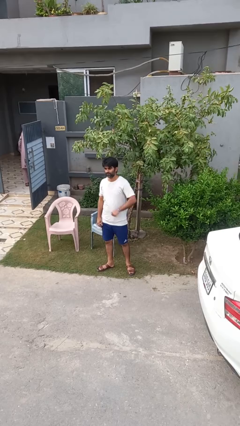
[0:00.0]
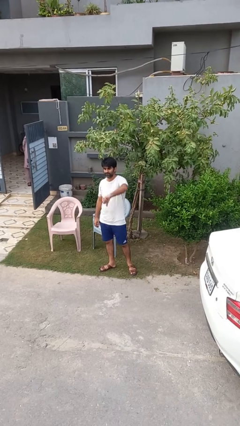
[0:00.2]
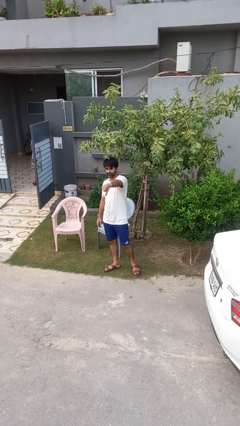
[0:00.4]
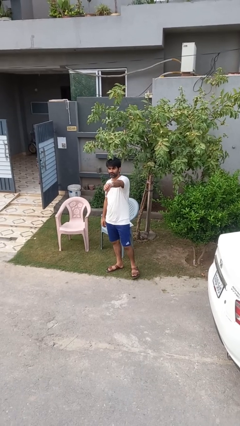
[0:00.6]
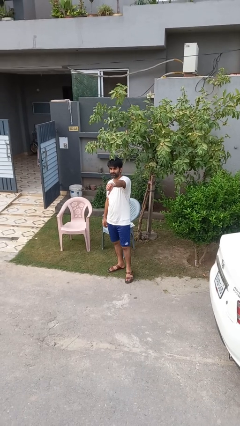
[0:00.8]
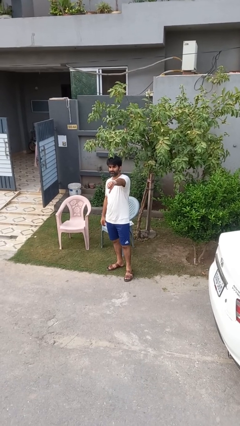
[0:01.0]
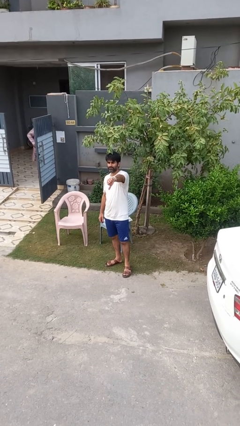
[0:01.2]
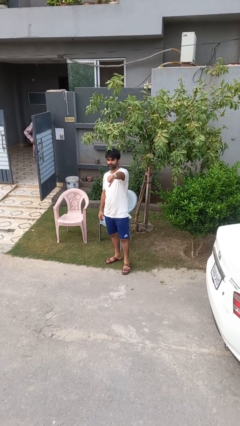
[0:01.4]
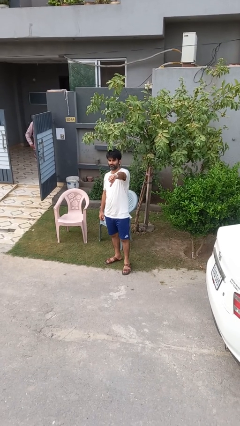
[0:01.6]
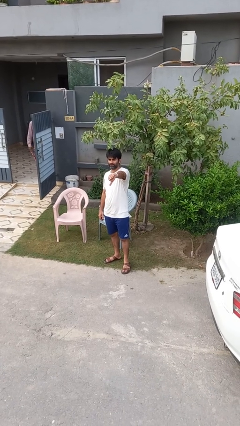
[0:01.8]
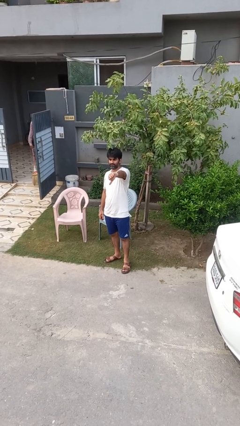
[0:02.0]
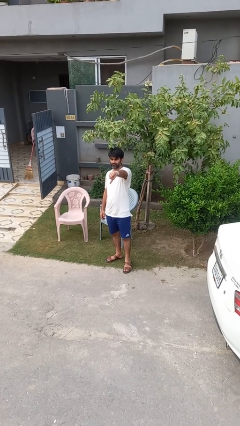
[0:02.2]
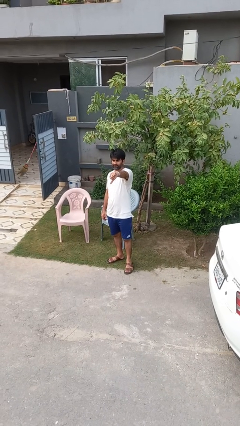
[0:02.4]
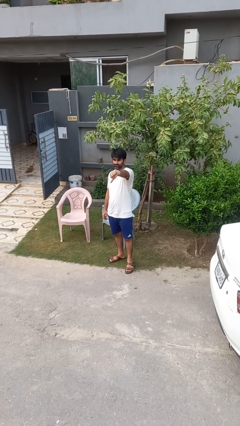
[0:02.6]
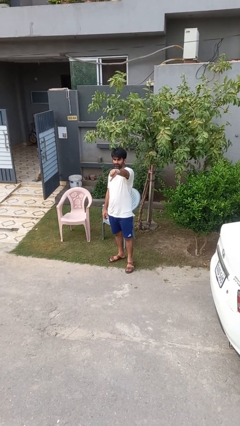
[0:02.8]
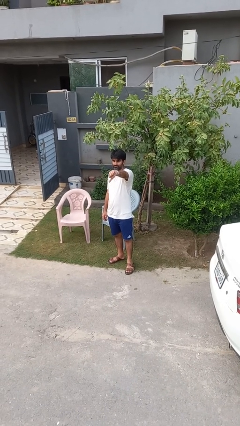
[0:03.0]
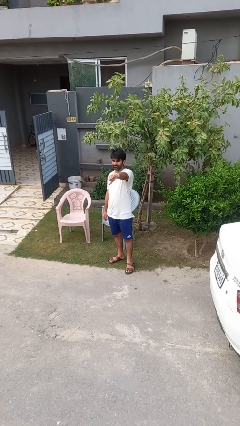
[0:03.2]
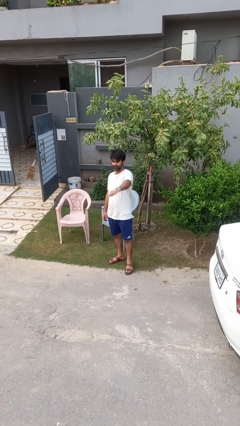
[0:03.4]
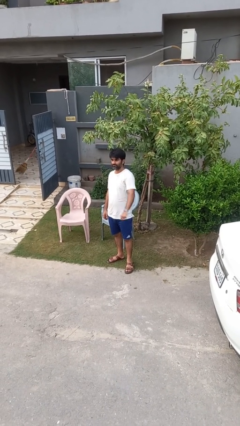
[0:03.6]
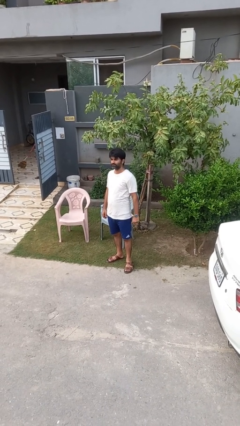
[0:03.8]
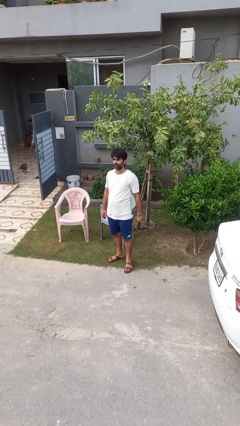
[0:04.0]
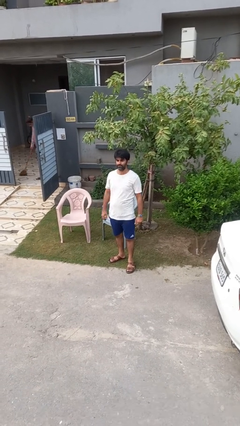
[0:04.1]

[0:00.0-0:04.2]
person gestures thumbs down

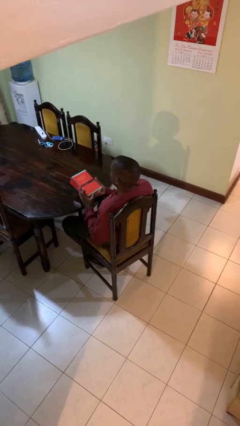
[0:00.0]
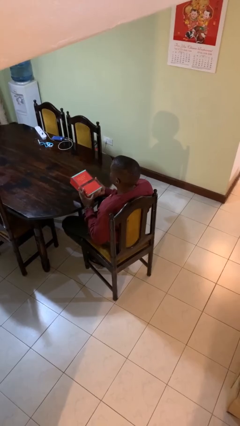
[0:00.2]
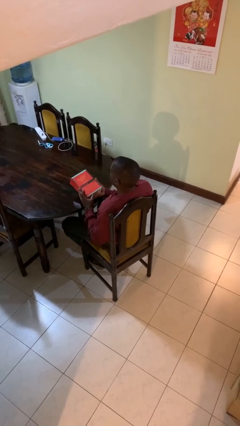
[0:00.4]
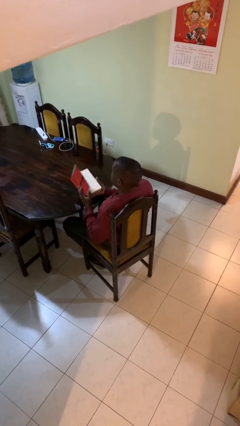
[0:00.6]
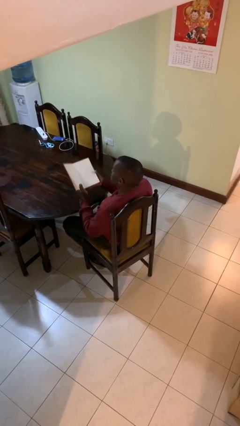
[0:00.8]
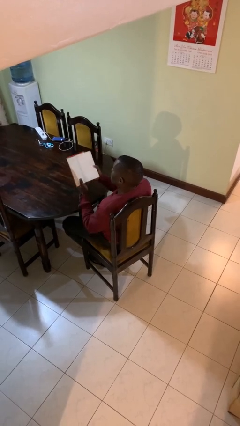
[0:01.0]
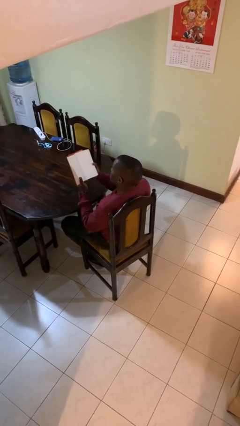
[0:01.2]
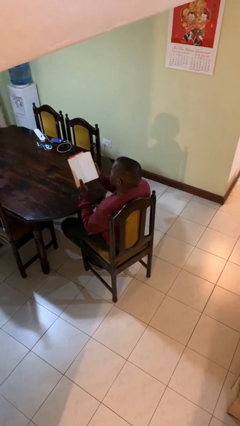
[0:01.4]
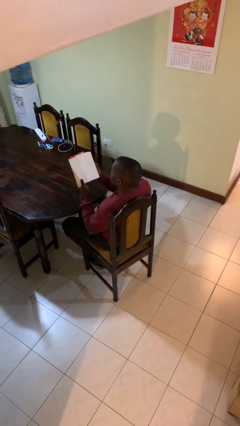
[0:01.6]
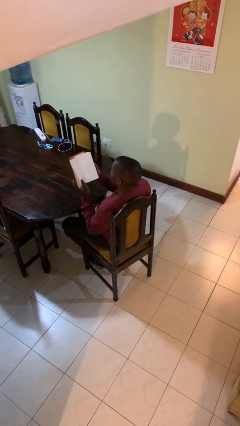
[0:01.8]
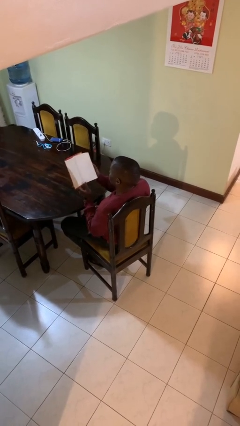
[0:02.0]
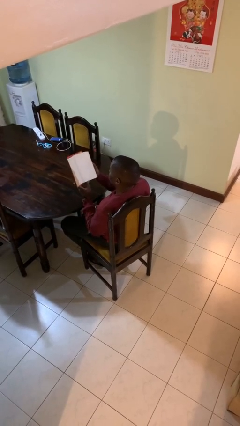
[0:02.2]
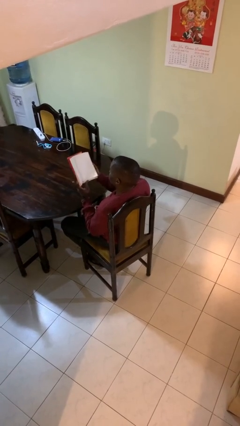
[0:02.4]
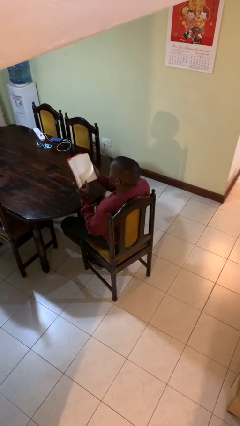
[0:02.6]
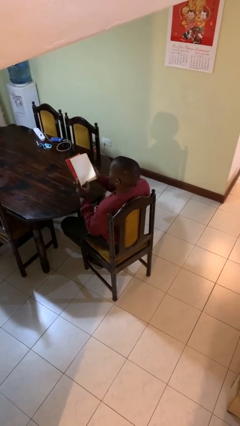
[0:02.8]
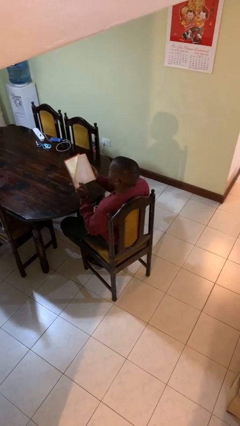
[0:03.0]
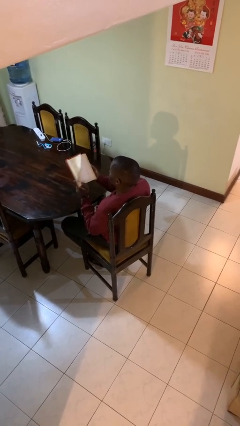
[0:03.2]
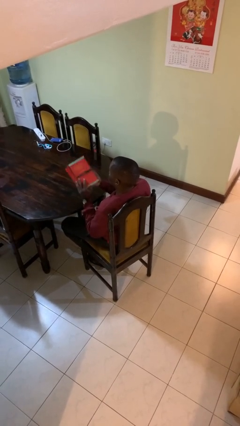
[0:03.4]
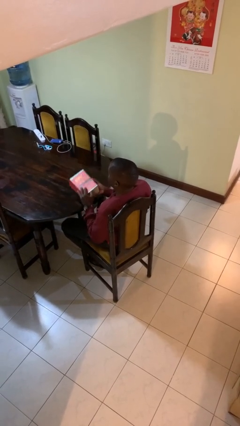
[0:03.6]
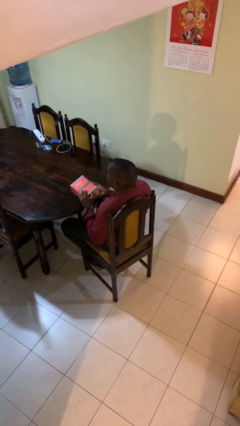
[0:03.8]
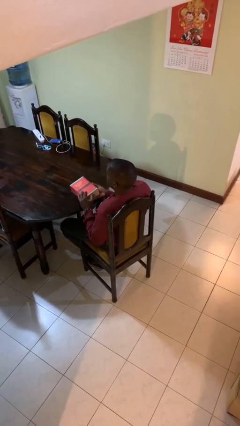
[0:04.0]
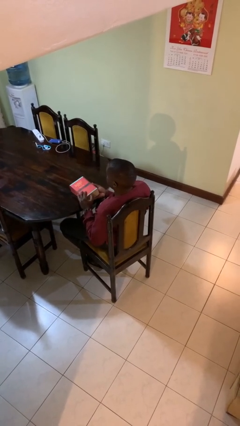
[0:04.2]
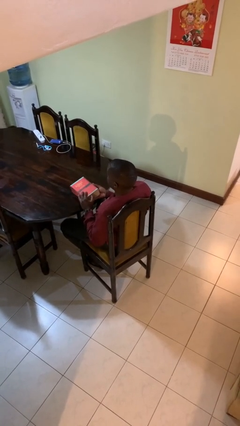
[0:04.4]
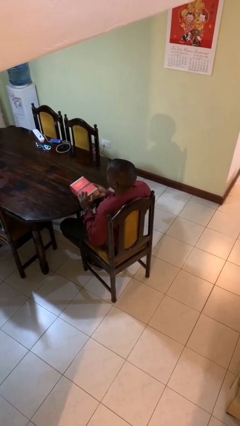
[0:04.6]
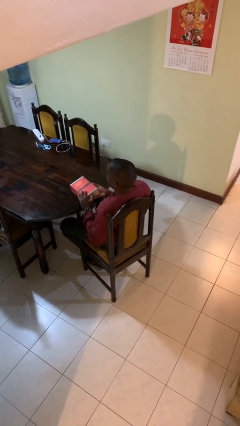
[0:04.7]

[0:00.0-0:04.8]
person reads book

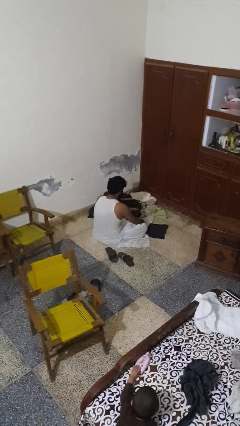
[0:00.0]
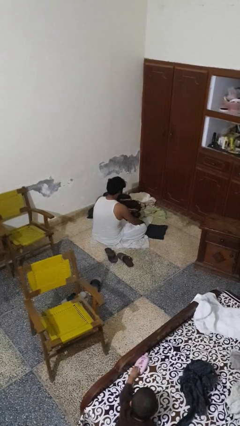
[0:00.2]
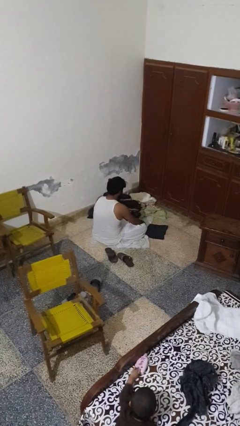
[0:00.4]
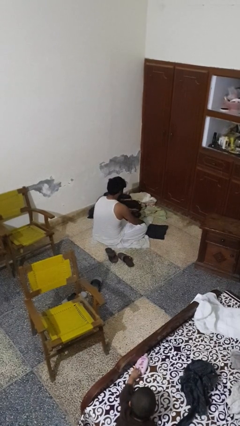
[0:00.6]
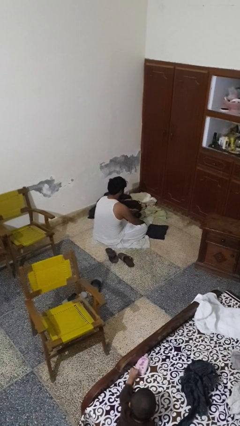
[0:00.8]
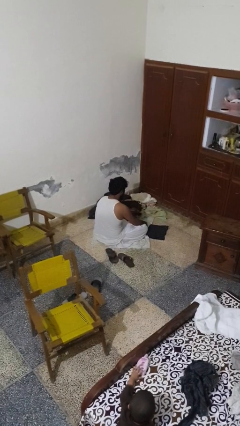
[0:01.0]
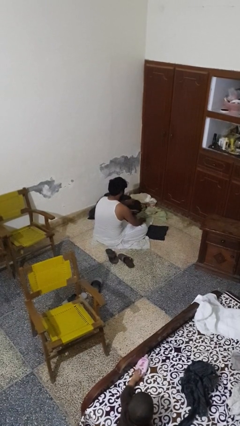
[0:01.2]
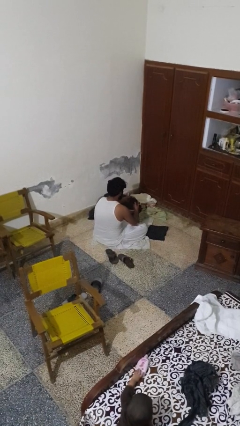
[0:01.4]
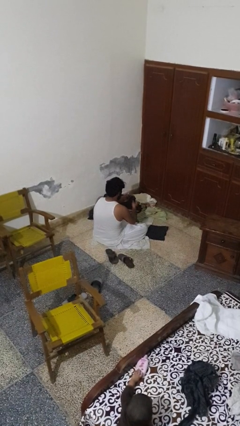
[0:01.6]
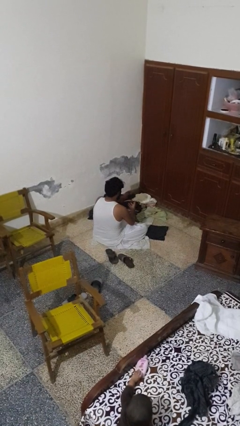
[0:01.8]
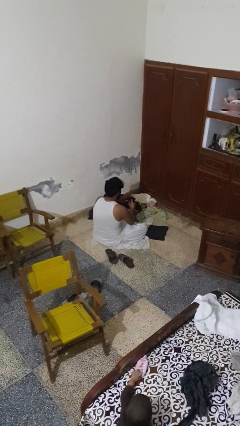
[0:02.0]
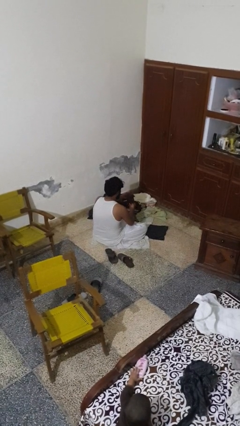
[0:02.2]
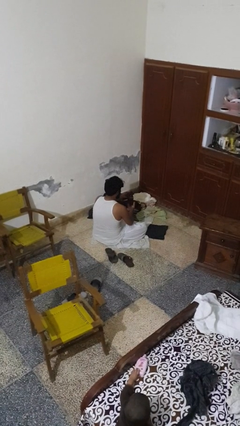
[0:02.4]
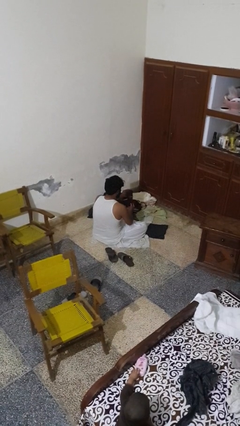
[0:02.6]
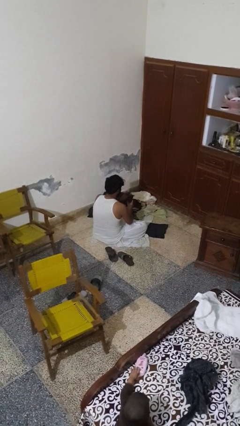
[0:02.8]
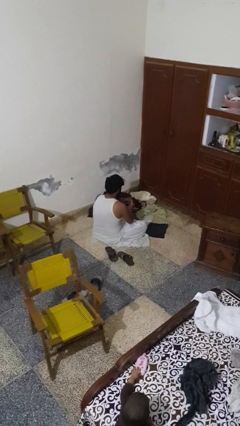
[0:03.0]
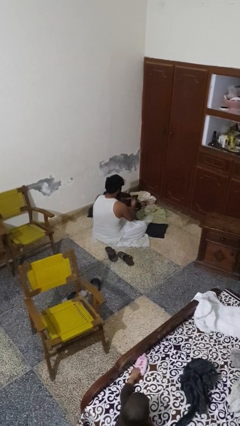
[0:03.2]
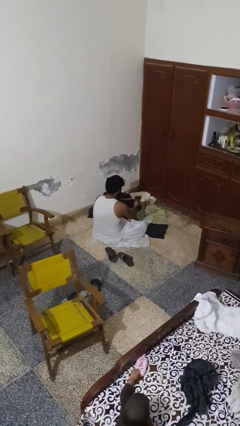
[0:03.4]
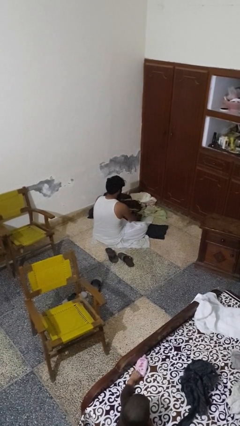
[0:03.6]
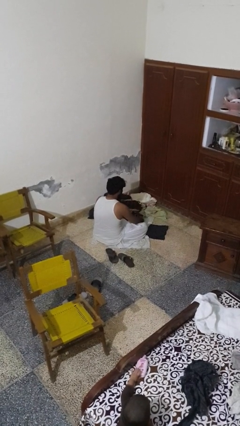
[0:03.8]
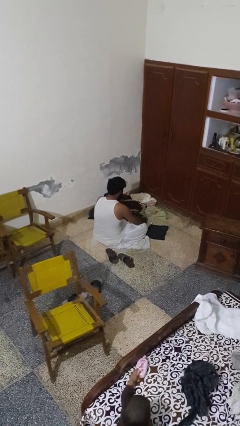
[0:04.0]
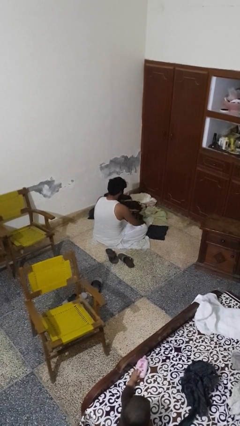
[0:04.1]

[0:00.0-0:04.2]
person folds socks

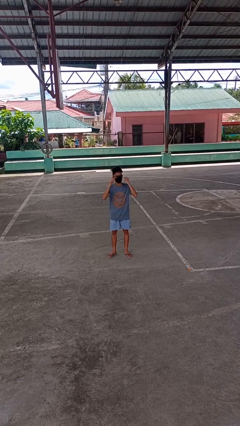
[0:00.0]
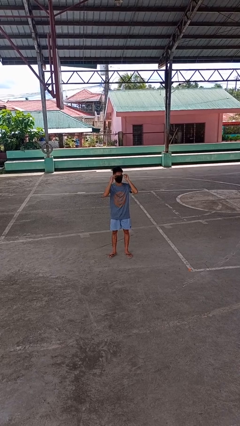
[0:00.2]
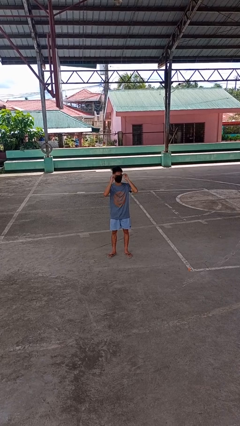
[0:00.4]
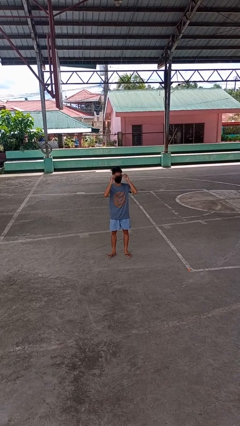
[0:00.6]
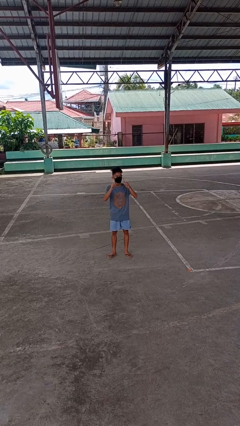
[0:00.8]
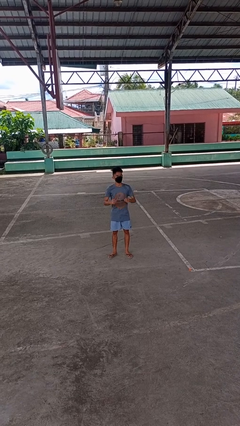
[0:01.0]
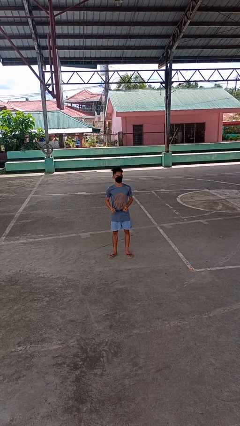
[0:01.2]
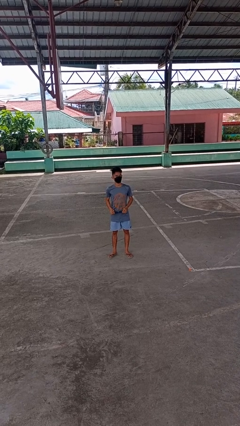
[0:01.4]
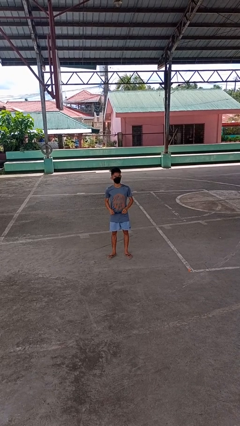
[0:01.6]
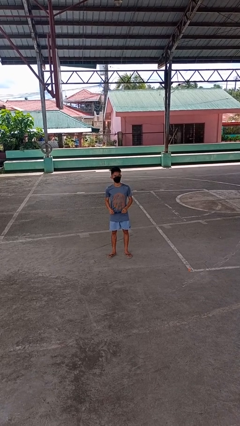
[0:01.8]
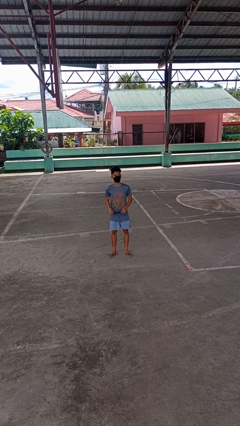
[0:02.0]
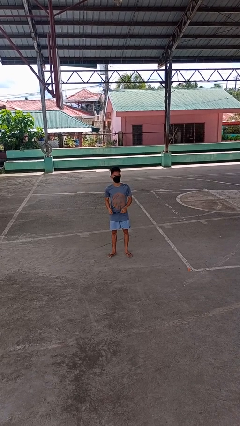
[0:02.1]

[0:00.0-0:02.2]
person takes off glasses

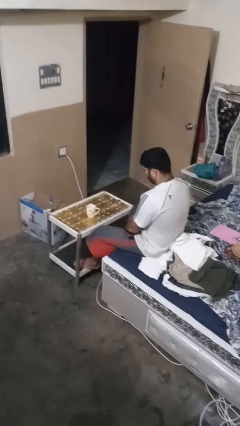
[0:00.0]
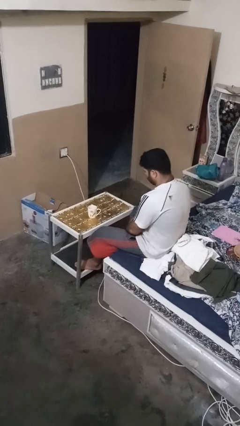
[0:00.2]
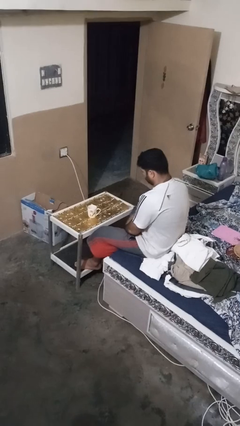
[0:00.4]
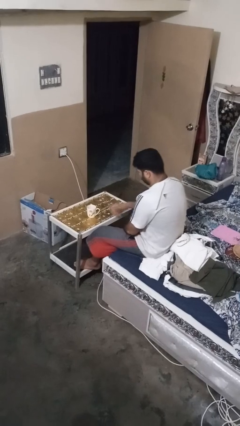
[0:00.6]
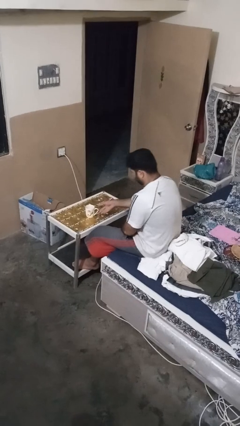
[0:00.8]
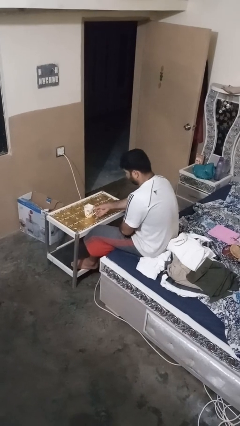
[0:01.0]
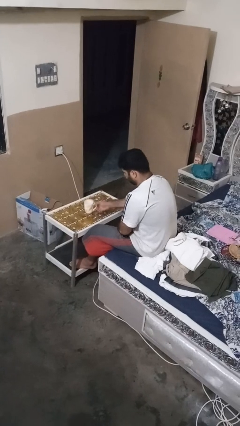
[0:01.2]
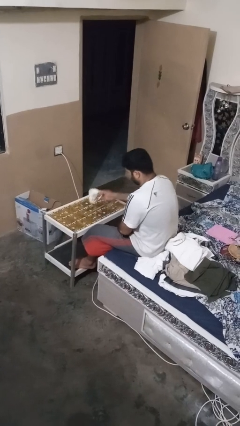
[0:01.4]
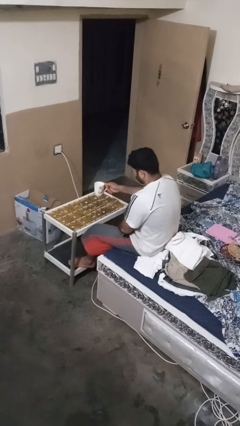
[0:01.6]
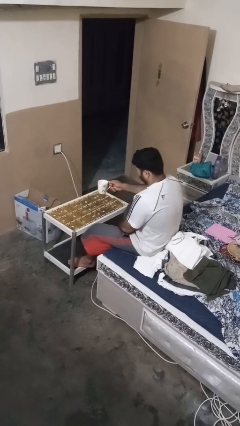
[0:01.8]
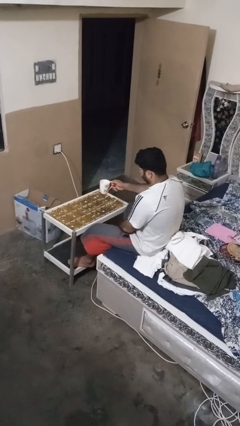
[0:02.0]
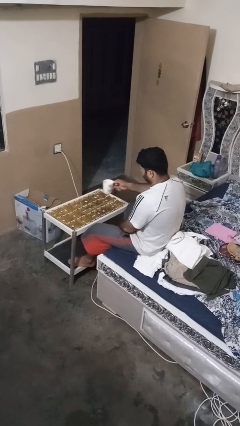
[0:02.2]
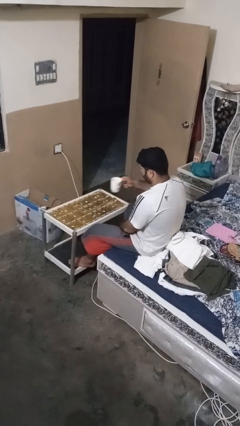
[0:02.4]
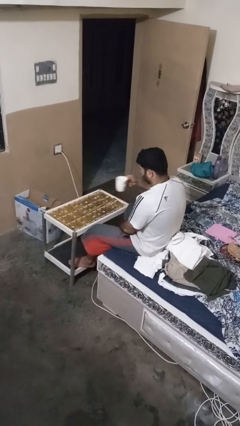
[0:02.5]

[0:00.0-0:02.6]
person picks up object from table
